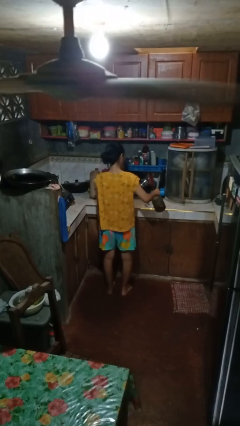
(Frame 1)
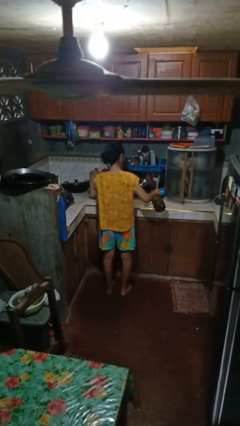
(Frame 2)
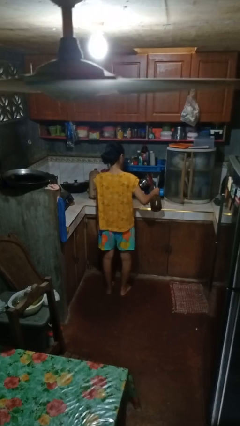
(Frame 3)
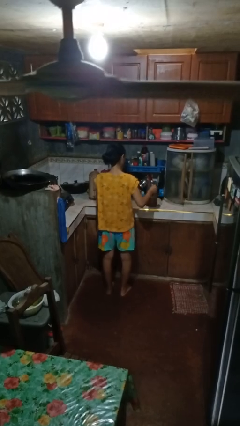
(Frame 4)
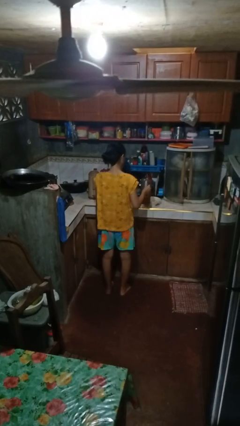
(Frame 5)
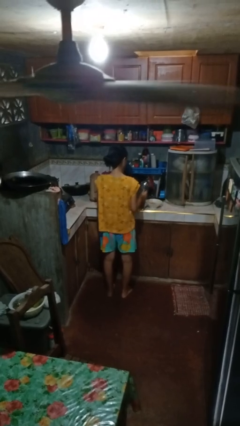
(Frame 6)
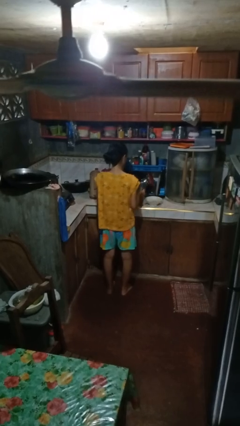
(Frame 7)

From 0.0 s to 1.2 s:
person pours into bowl

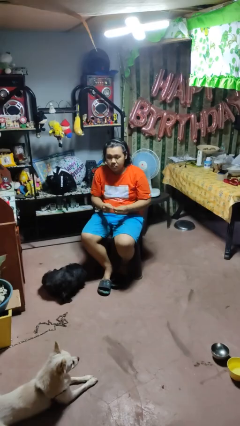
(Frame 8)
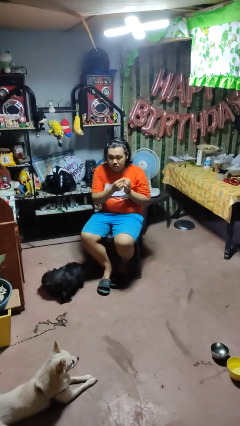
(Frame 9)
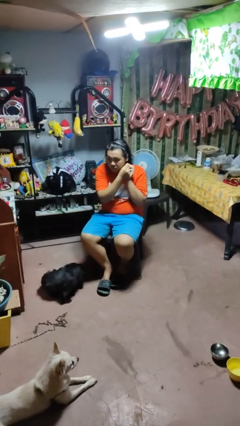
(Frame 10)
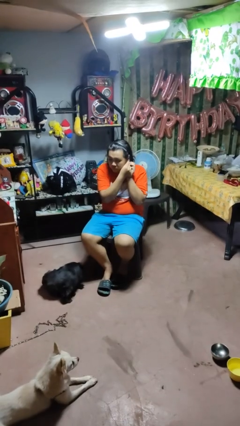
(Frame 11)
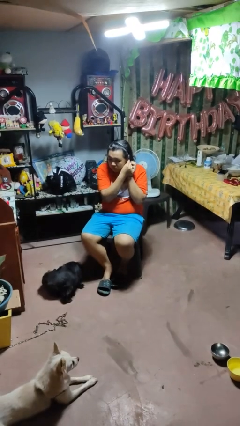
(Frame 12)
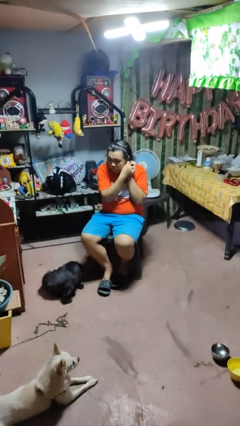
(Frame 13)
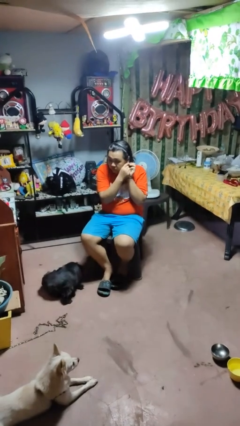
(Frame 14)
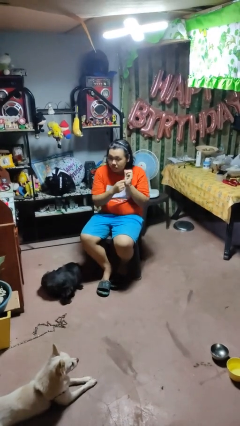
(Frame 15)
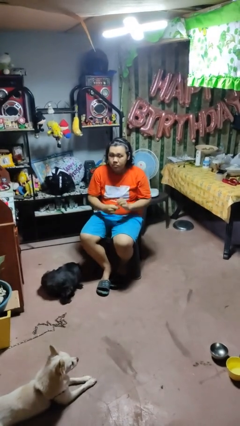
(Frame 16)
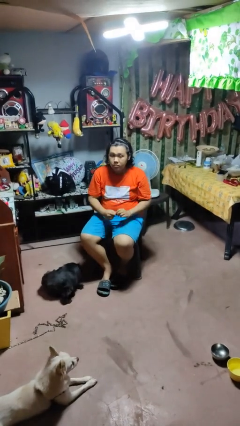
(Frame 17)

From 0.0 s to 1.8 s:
person puts on earrings

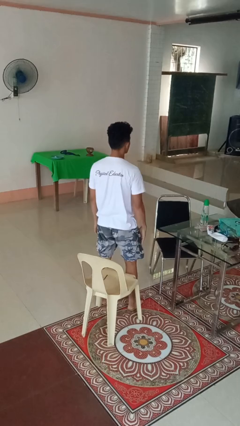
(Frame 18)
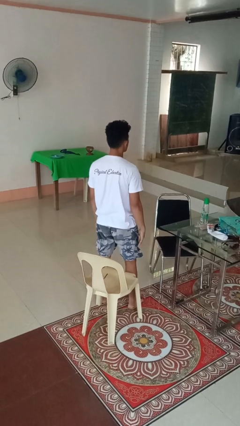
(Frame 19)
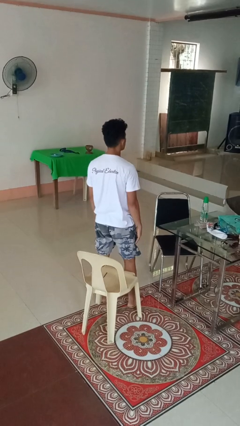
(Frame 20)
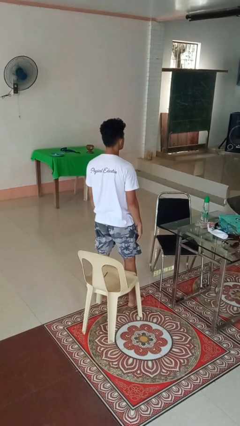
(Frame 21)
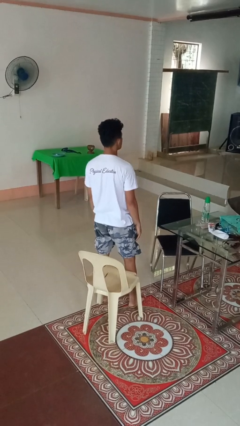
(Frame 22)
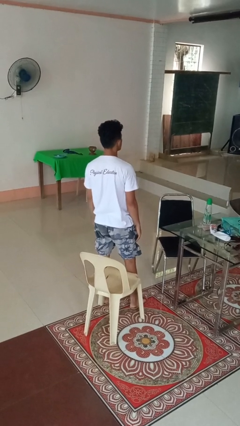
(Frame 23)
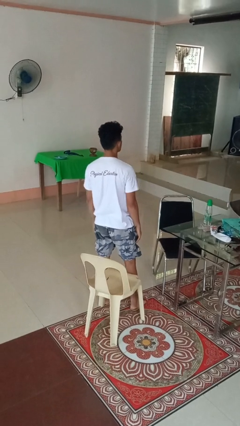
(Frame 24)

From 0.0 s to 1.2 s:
person slaps hands on thighs

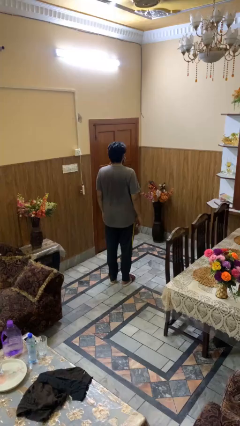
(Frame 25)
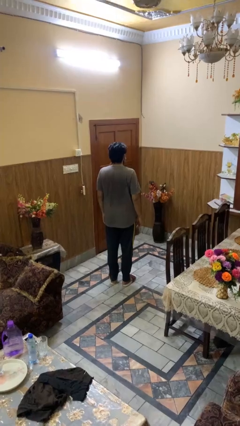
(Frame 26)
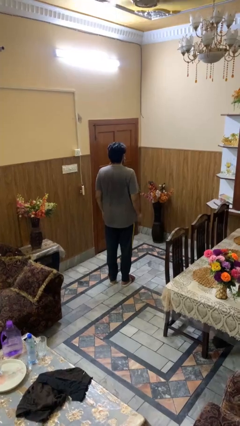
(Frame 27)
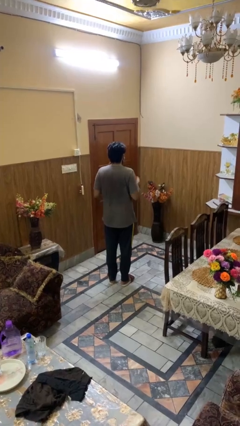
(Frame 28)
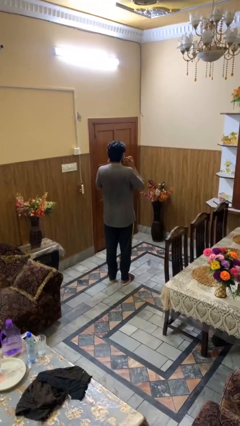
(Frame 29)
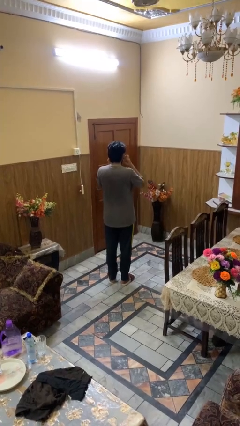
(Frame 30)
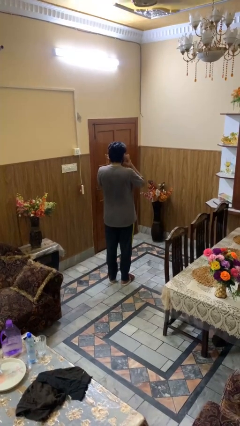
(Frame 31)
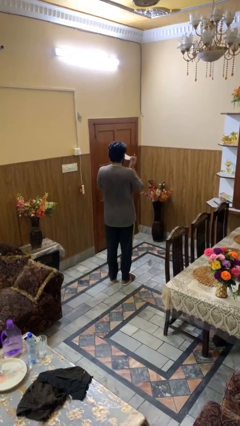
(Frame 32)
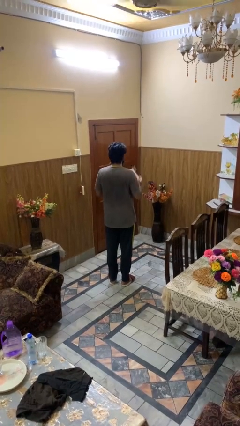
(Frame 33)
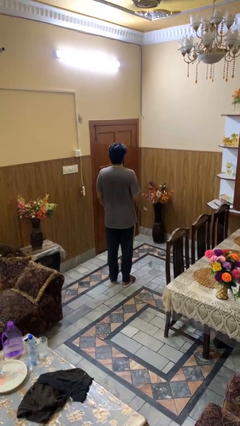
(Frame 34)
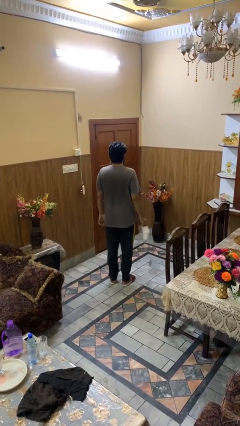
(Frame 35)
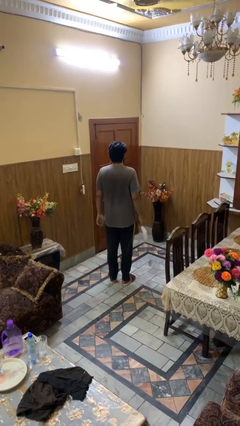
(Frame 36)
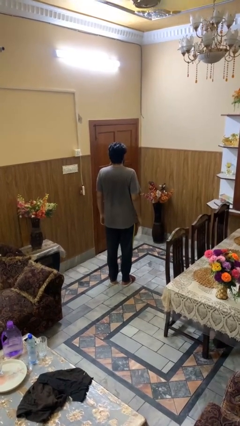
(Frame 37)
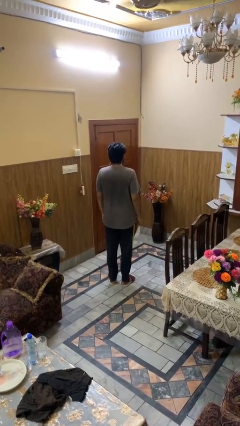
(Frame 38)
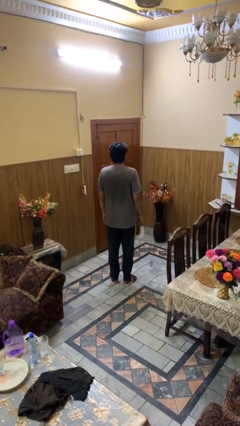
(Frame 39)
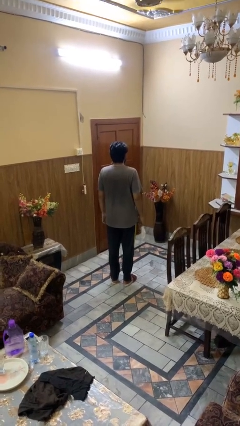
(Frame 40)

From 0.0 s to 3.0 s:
person takes off facemask

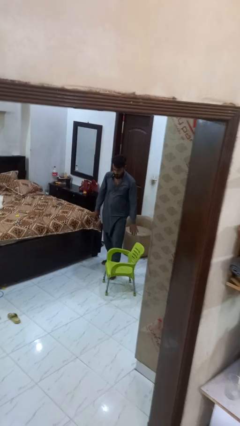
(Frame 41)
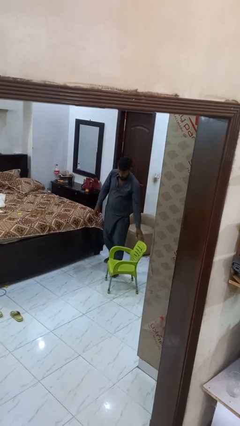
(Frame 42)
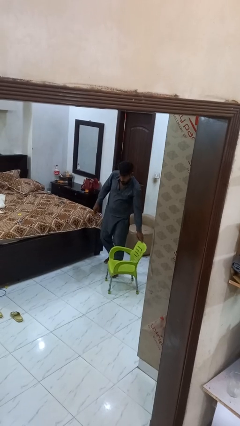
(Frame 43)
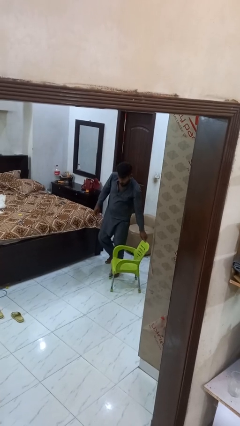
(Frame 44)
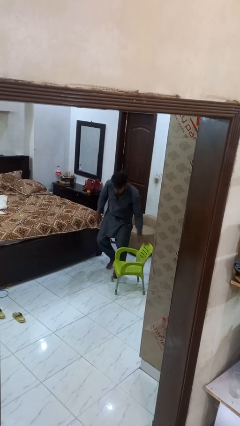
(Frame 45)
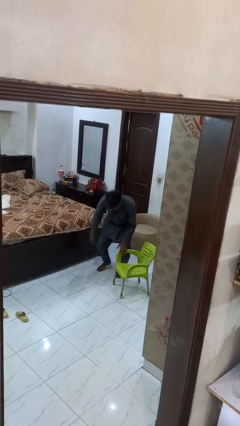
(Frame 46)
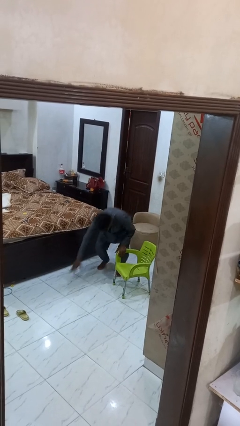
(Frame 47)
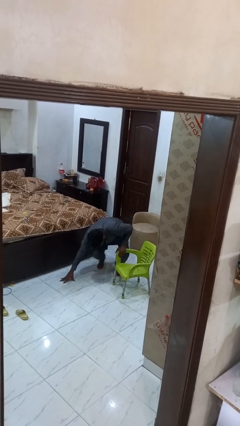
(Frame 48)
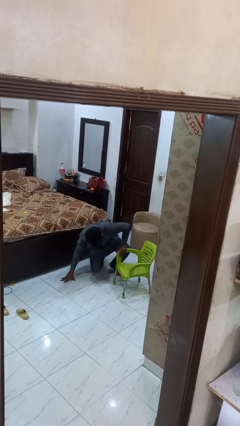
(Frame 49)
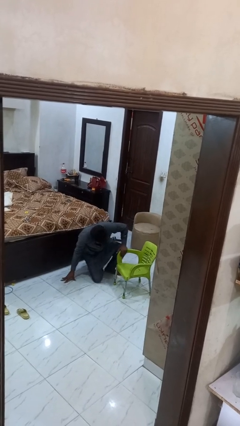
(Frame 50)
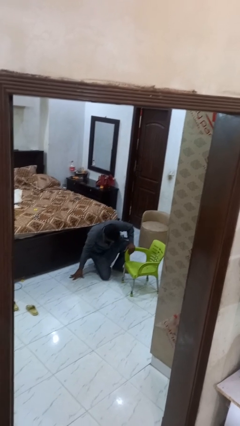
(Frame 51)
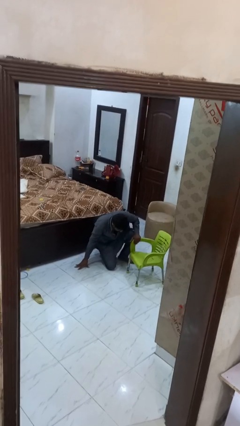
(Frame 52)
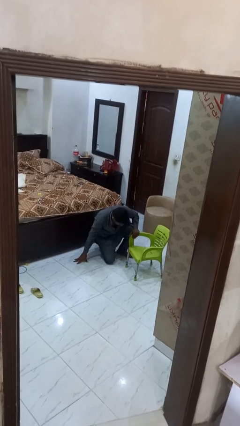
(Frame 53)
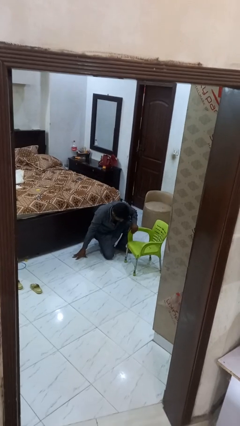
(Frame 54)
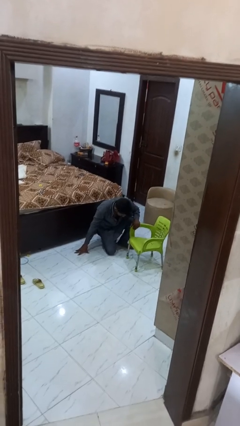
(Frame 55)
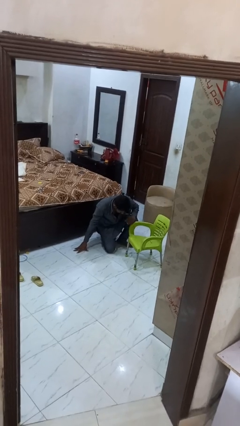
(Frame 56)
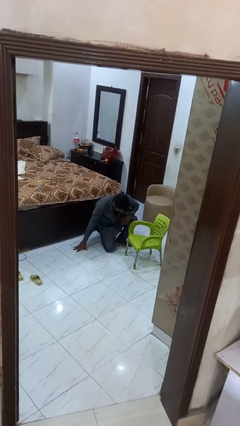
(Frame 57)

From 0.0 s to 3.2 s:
person trips on object on floor

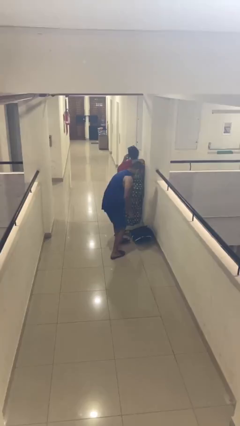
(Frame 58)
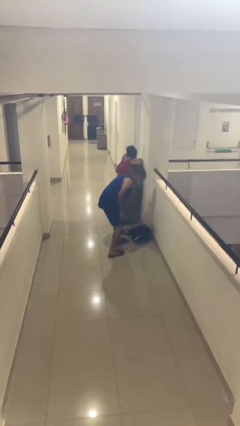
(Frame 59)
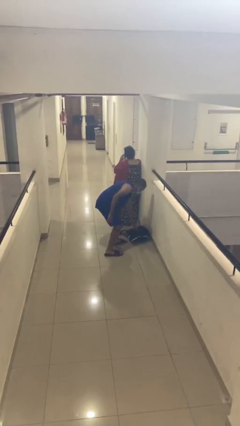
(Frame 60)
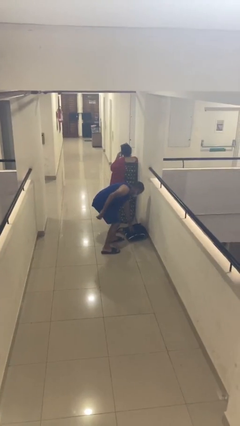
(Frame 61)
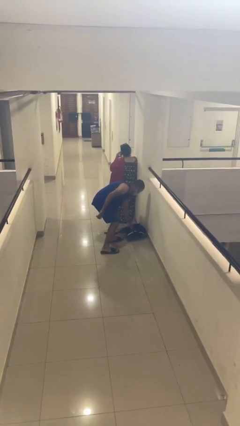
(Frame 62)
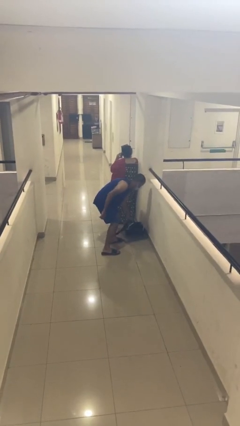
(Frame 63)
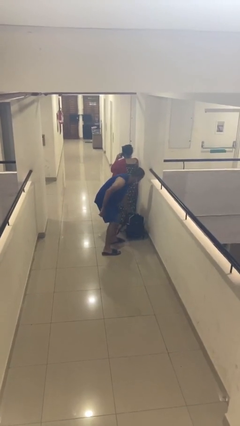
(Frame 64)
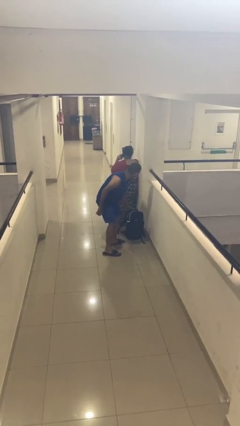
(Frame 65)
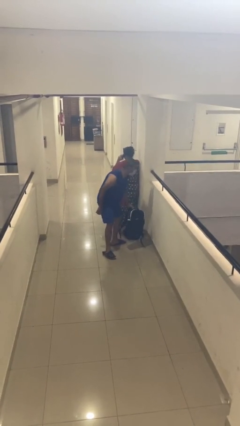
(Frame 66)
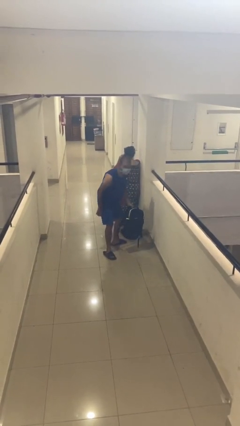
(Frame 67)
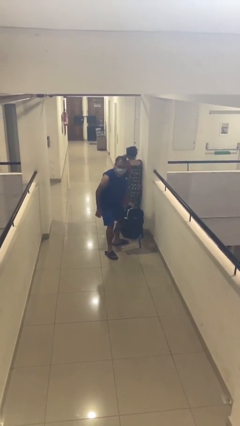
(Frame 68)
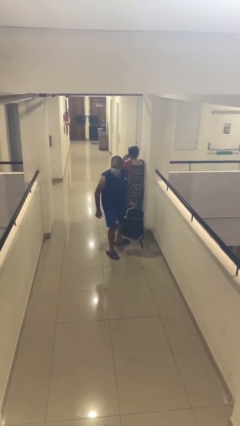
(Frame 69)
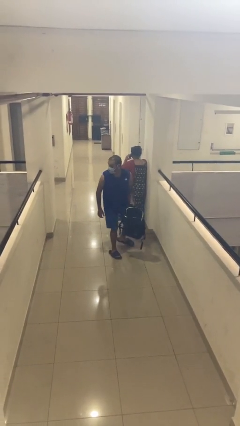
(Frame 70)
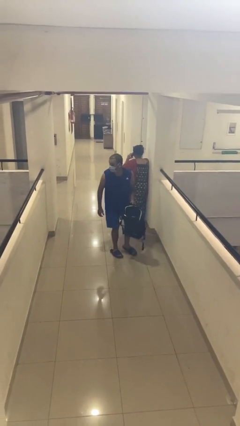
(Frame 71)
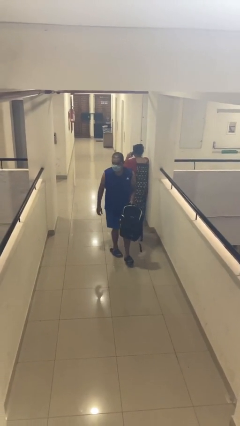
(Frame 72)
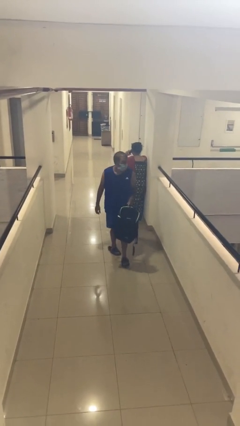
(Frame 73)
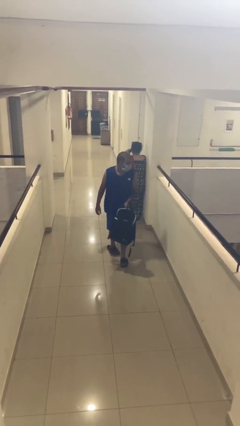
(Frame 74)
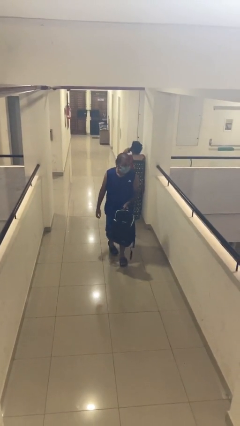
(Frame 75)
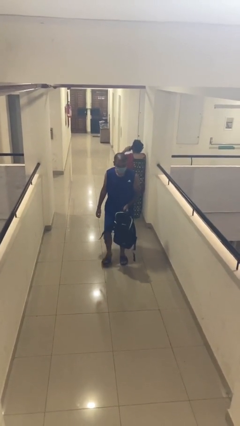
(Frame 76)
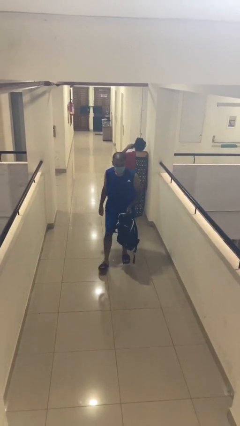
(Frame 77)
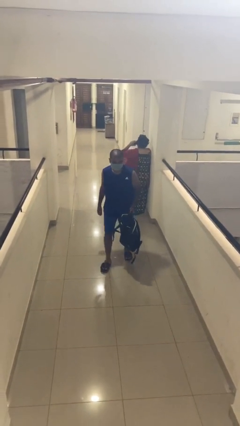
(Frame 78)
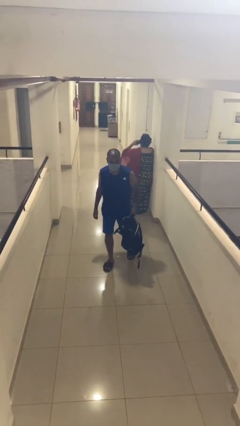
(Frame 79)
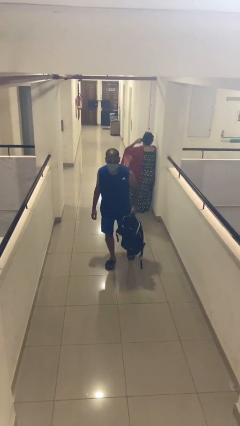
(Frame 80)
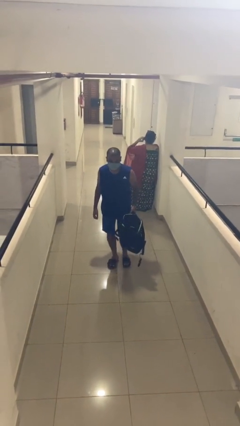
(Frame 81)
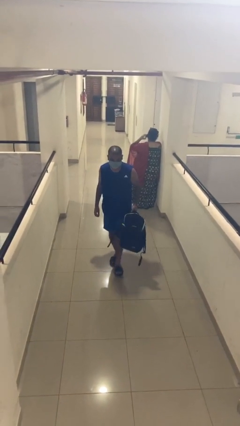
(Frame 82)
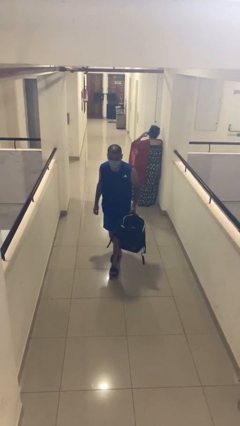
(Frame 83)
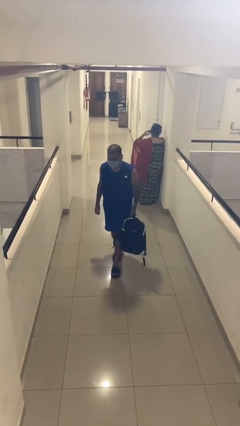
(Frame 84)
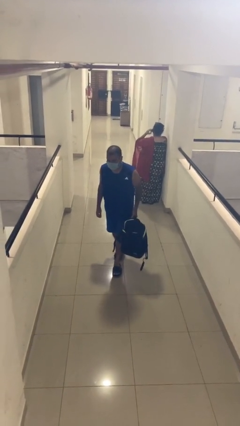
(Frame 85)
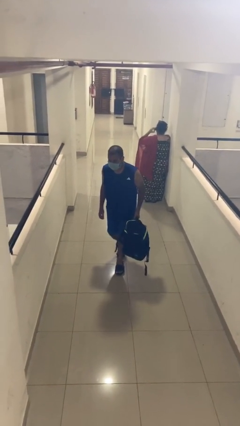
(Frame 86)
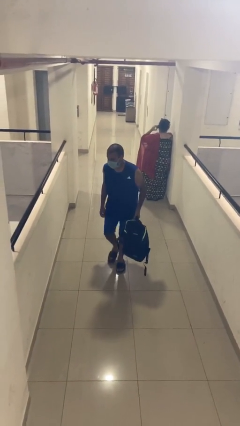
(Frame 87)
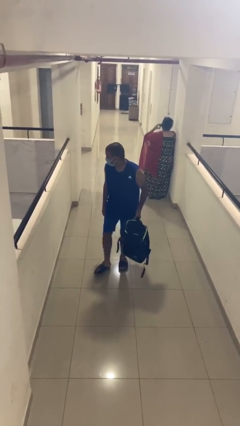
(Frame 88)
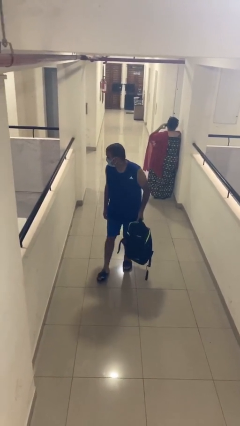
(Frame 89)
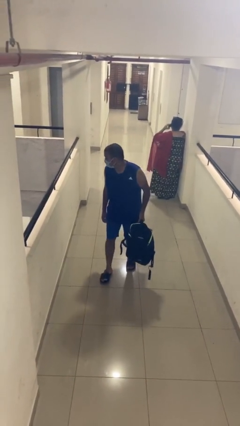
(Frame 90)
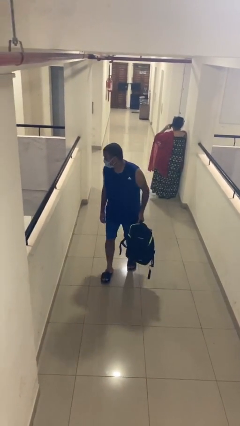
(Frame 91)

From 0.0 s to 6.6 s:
person steals object from person
